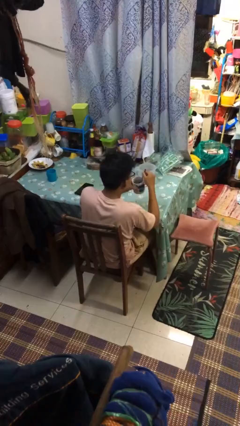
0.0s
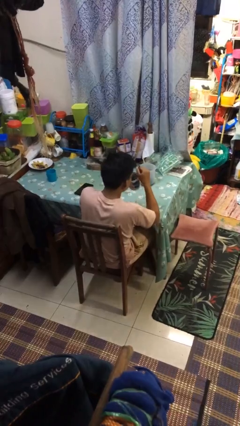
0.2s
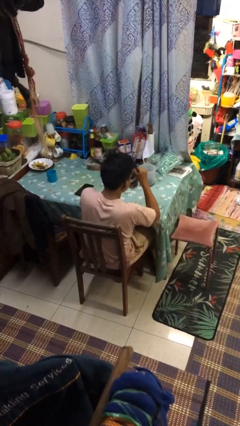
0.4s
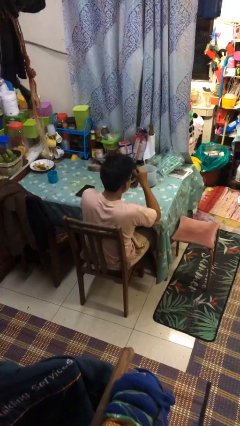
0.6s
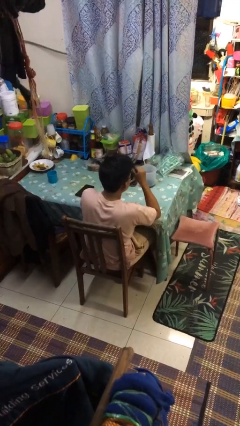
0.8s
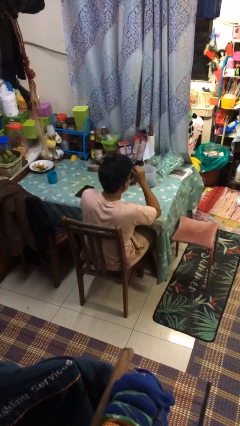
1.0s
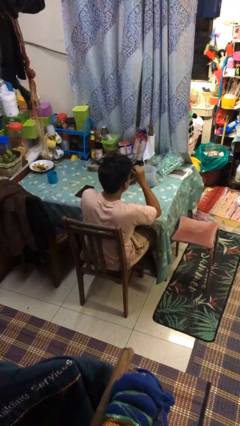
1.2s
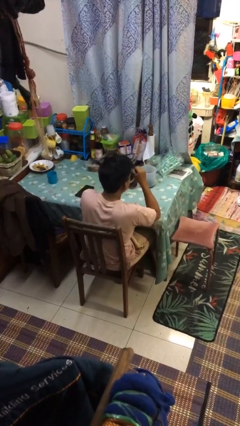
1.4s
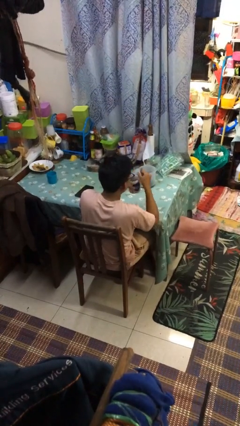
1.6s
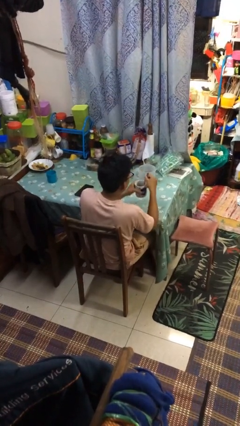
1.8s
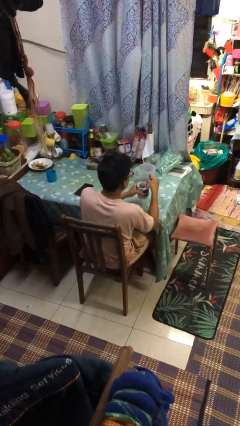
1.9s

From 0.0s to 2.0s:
person drinks from mug

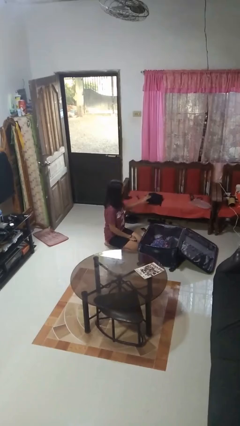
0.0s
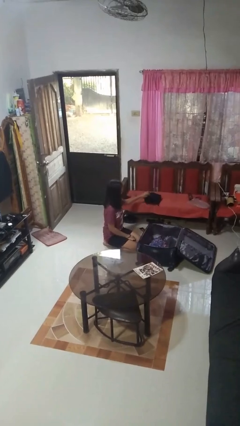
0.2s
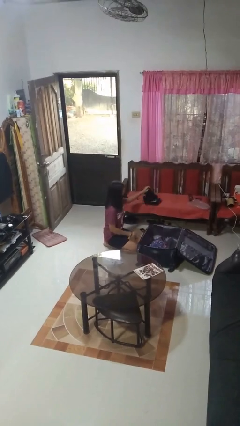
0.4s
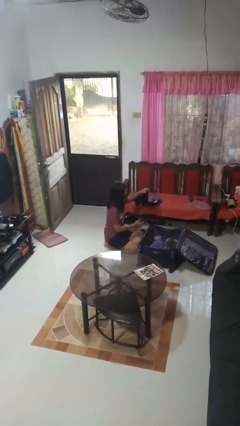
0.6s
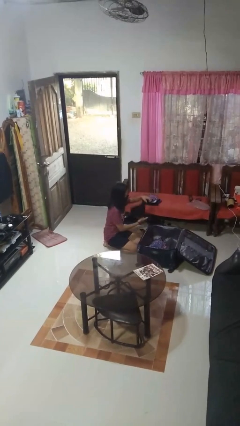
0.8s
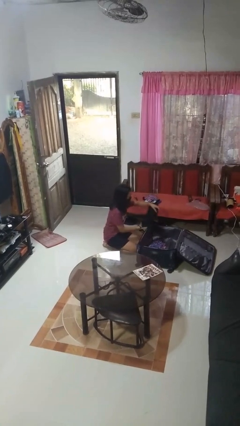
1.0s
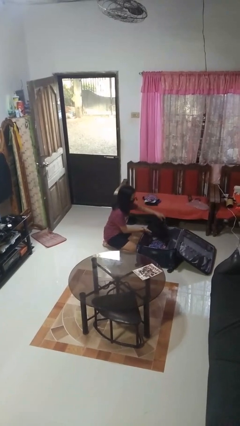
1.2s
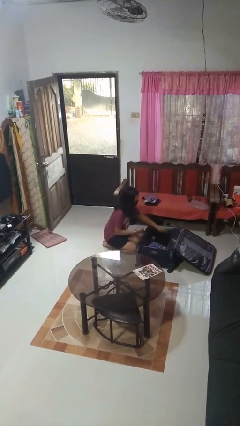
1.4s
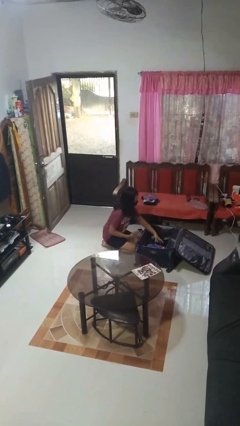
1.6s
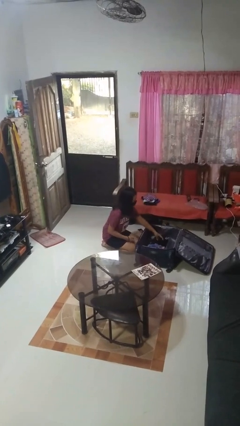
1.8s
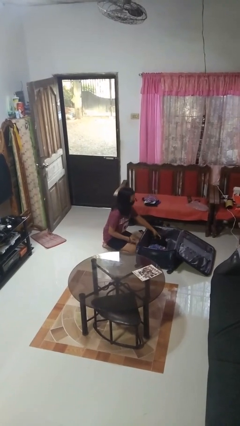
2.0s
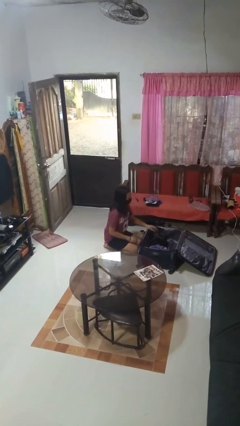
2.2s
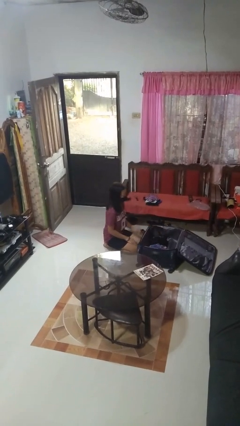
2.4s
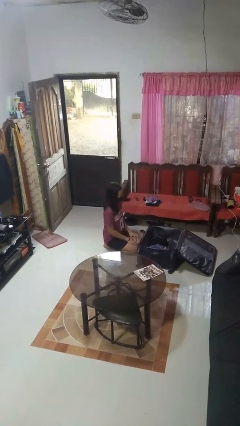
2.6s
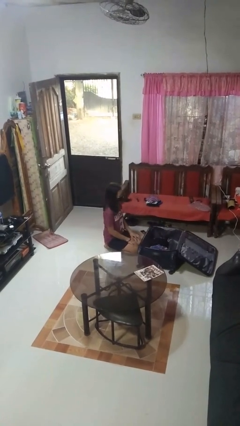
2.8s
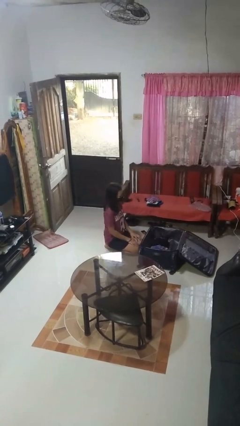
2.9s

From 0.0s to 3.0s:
person loads clothes into suitcase

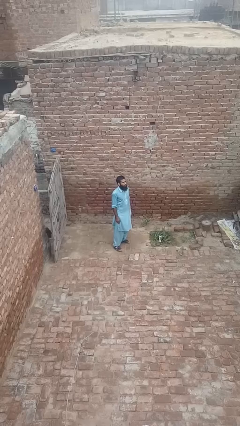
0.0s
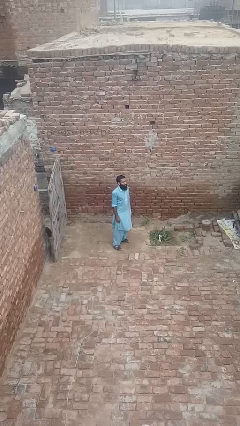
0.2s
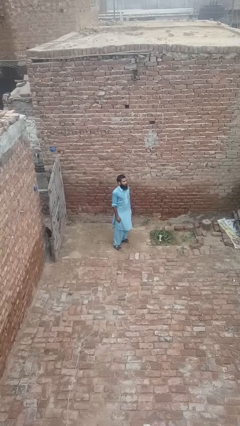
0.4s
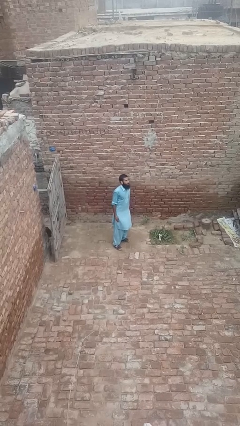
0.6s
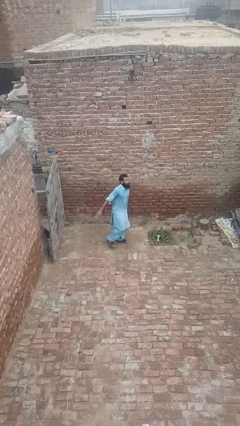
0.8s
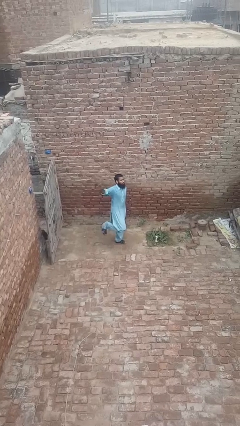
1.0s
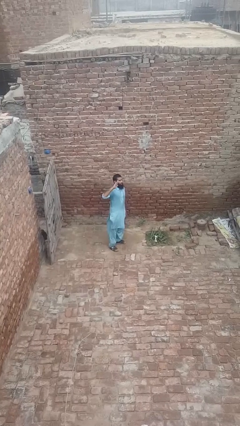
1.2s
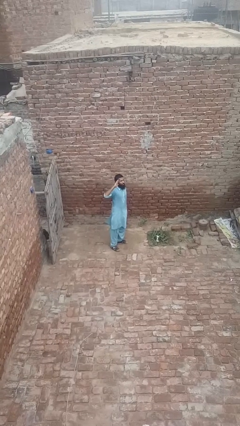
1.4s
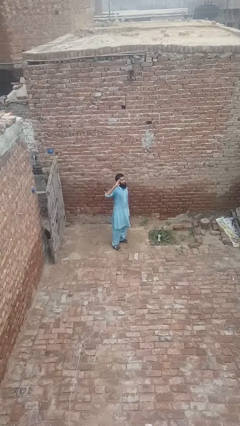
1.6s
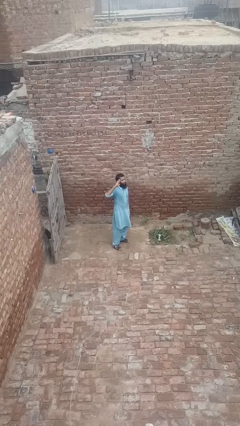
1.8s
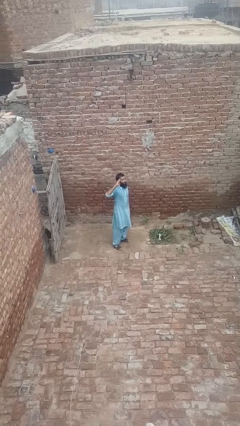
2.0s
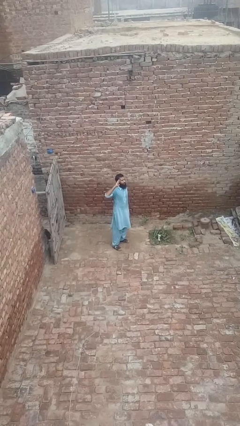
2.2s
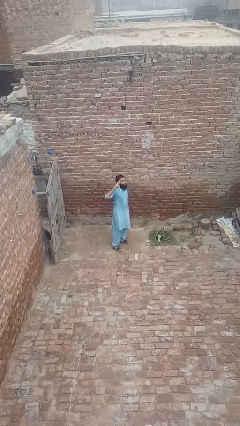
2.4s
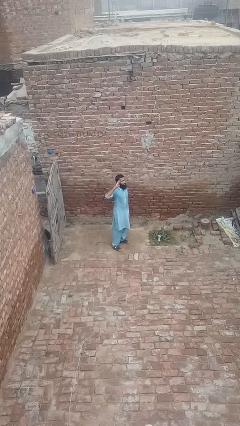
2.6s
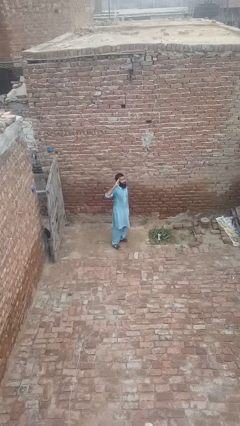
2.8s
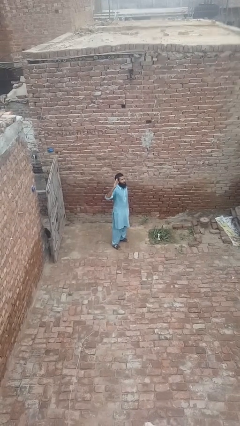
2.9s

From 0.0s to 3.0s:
person salutes

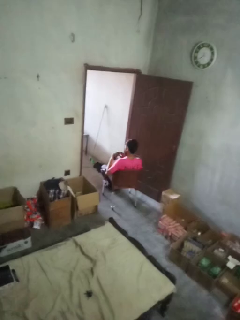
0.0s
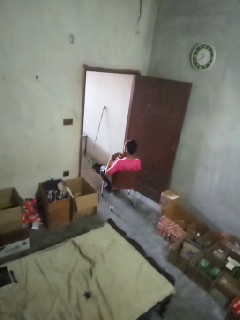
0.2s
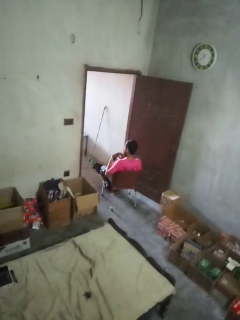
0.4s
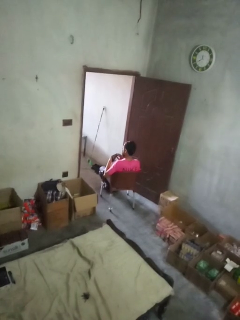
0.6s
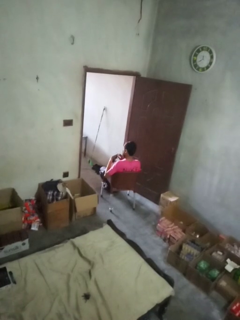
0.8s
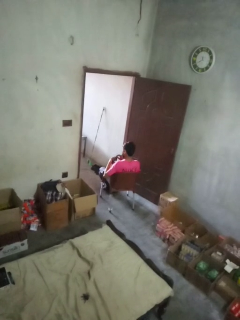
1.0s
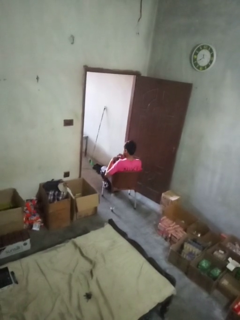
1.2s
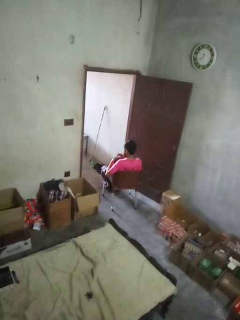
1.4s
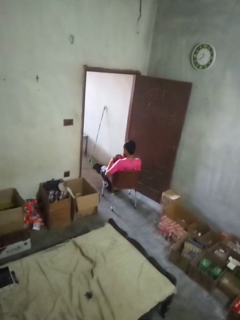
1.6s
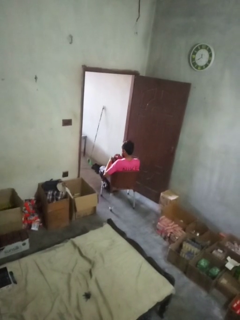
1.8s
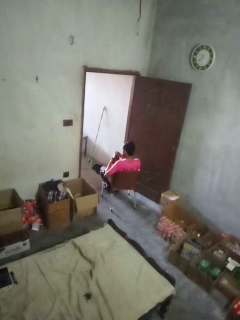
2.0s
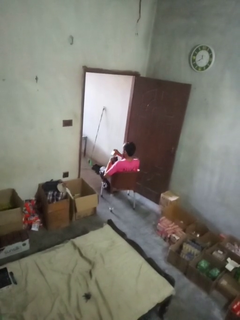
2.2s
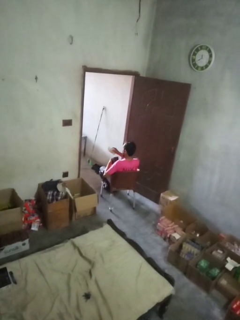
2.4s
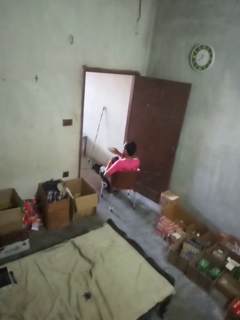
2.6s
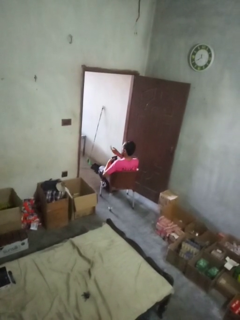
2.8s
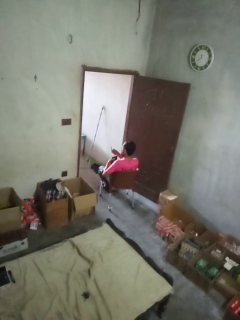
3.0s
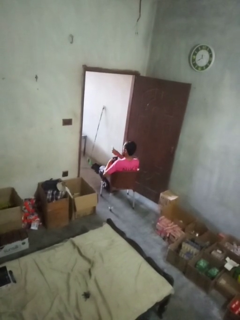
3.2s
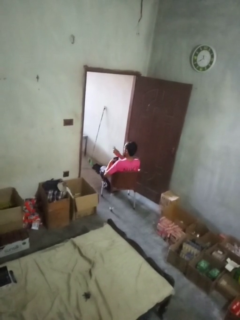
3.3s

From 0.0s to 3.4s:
person takes object from purse

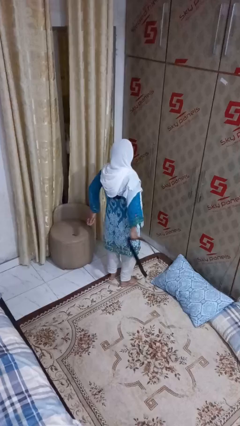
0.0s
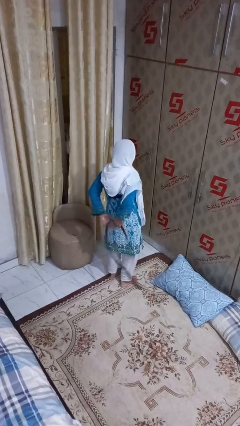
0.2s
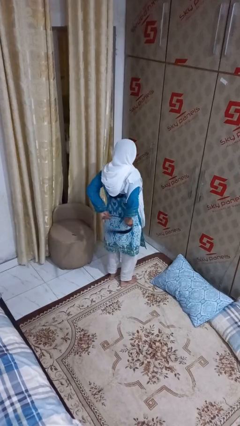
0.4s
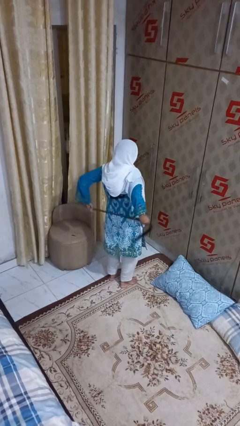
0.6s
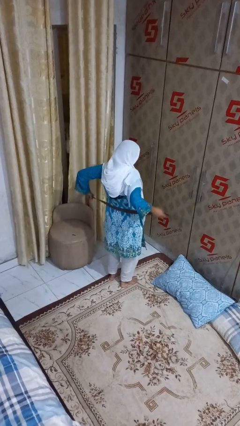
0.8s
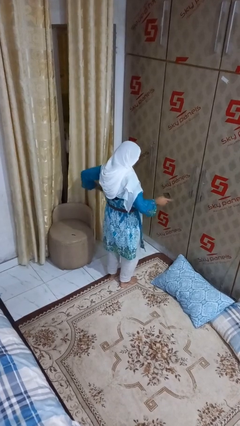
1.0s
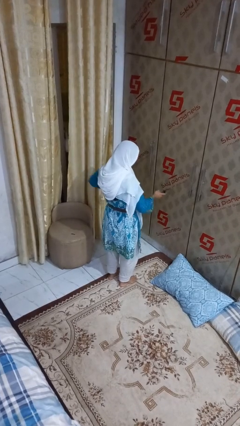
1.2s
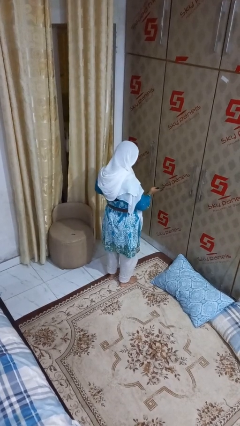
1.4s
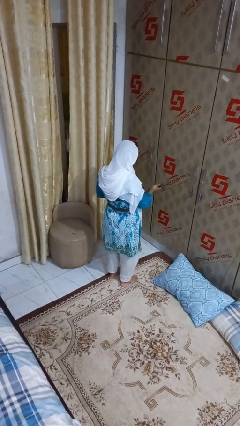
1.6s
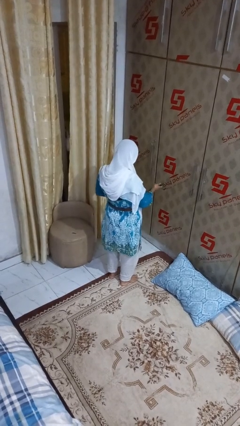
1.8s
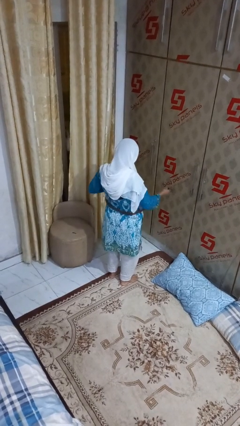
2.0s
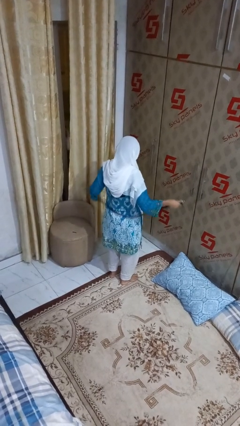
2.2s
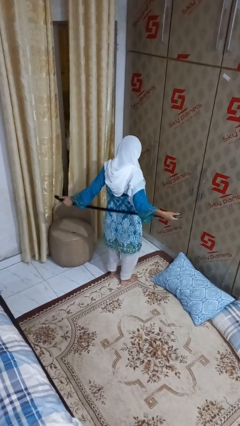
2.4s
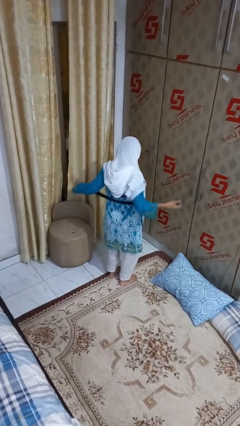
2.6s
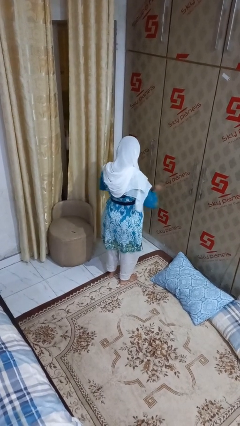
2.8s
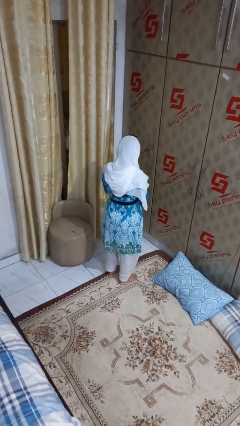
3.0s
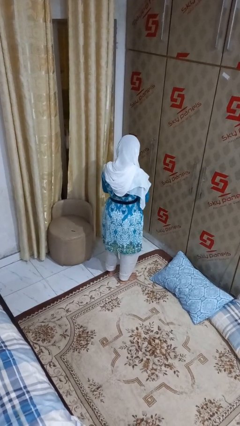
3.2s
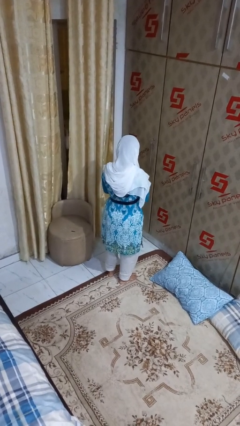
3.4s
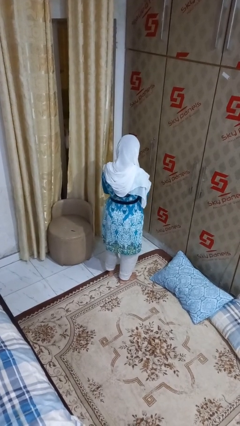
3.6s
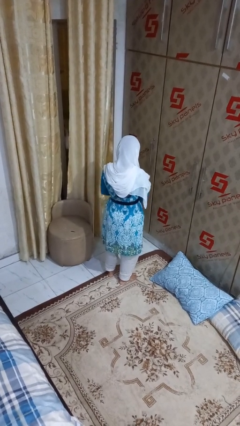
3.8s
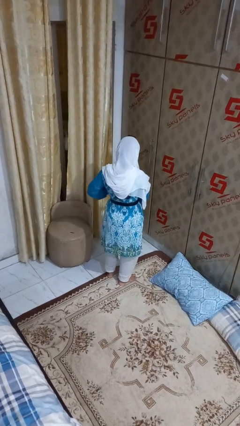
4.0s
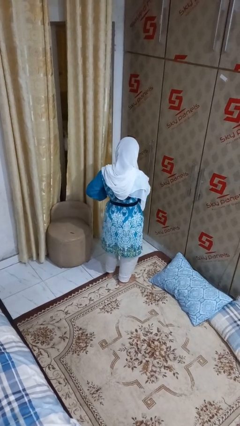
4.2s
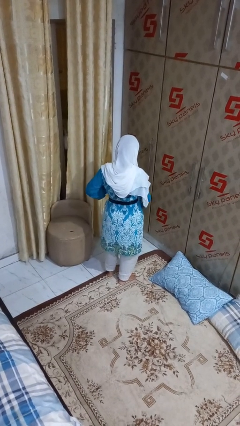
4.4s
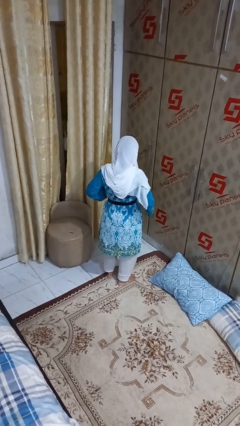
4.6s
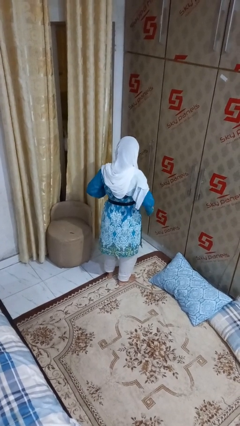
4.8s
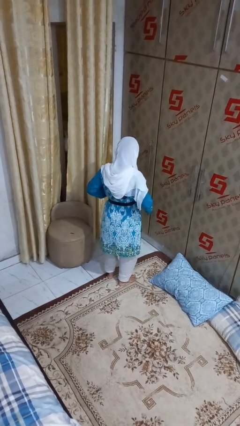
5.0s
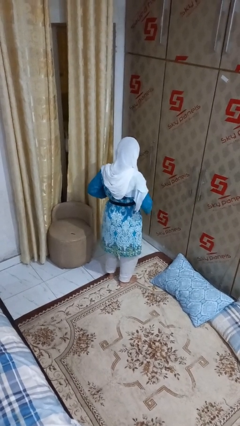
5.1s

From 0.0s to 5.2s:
person puts on belt

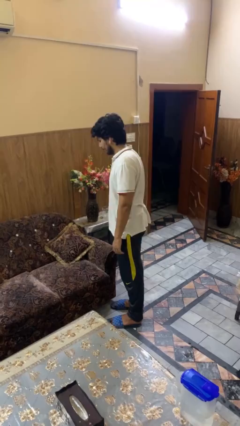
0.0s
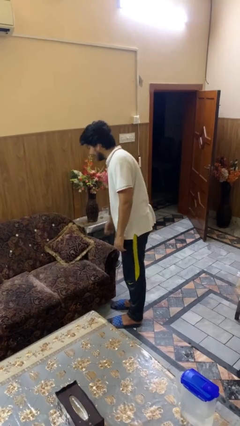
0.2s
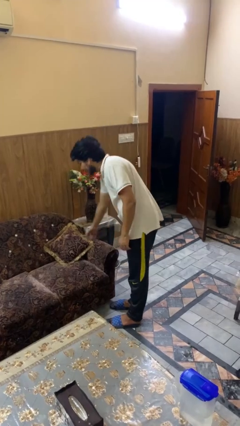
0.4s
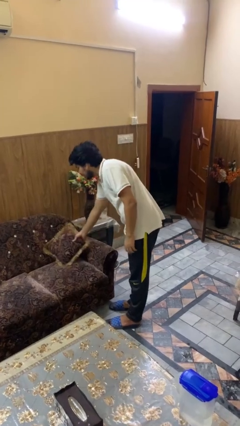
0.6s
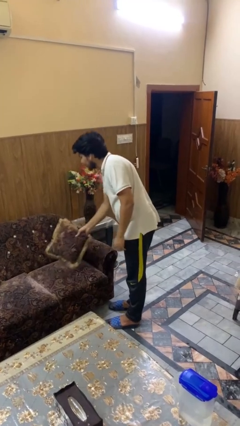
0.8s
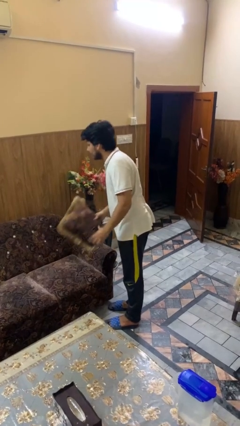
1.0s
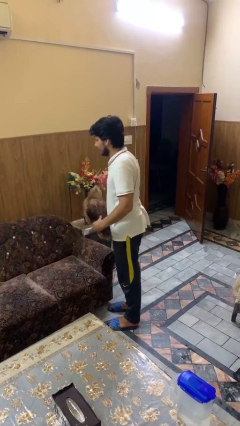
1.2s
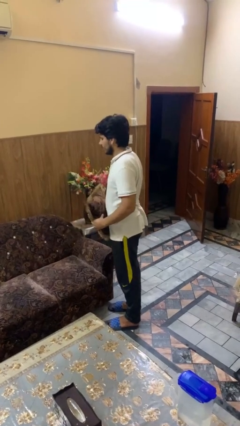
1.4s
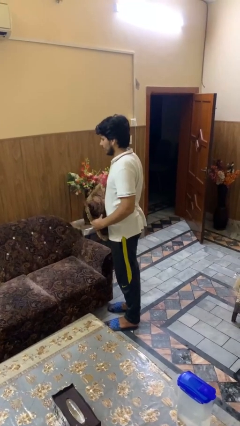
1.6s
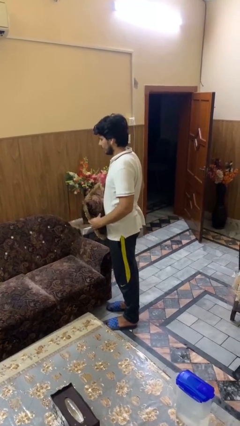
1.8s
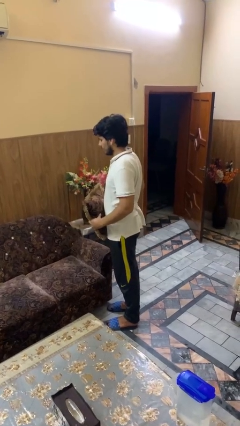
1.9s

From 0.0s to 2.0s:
person picks up object from couch
